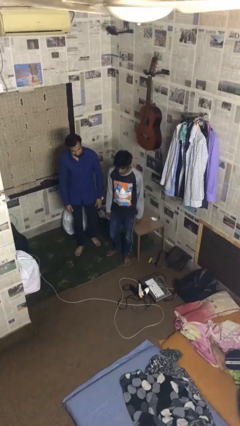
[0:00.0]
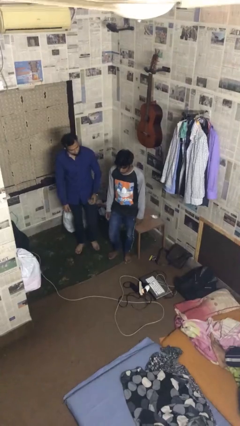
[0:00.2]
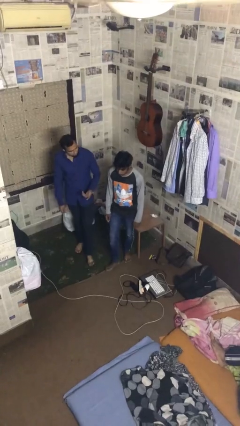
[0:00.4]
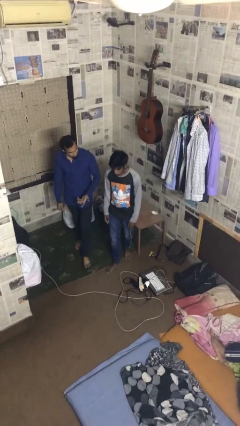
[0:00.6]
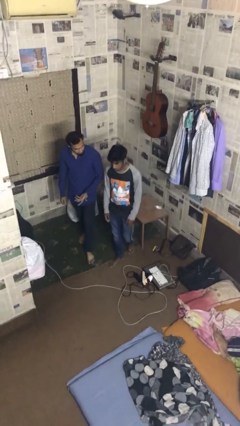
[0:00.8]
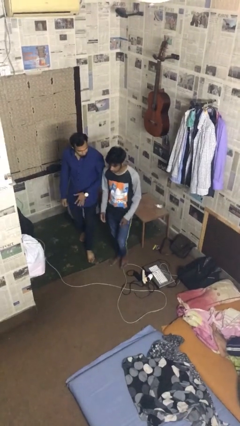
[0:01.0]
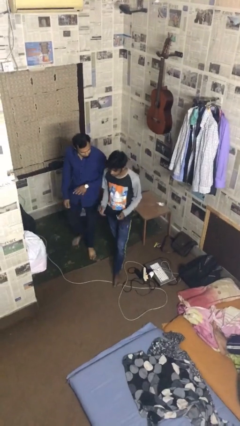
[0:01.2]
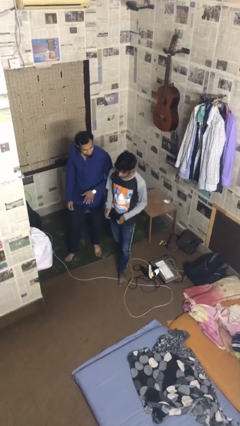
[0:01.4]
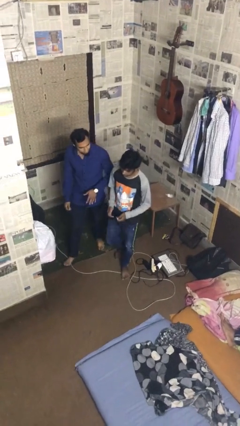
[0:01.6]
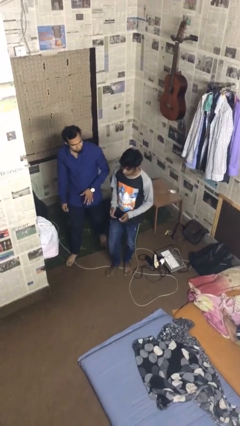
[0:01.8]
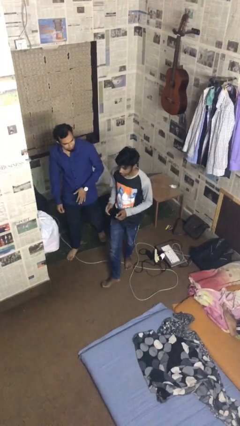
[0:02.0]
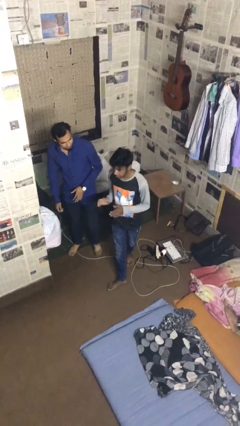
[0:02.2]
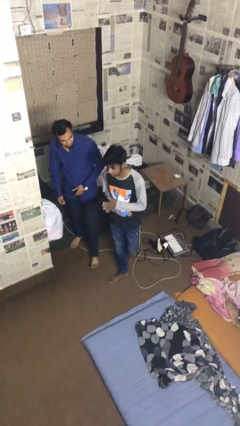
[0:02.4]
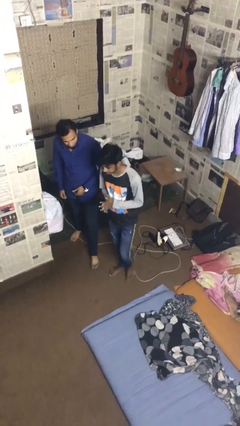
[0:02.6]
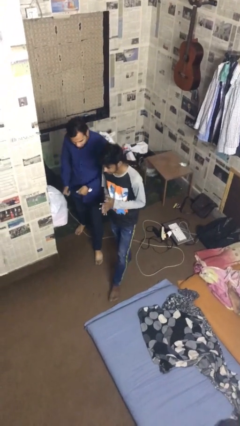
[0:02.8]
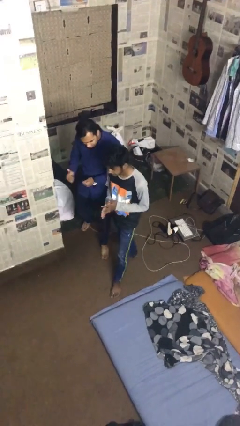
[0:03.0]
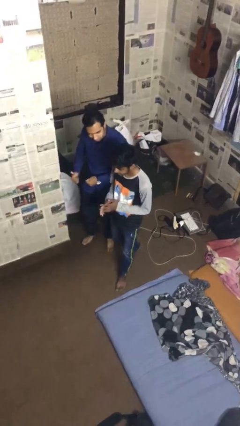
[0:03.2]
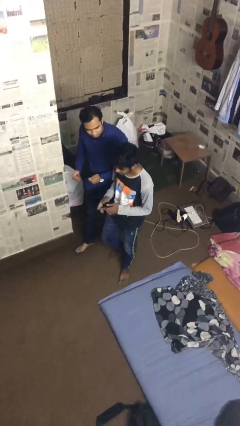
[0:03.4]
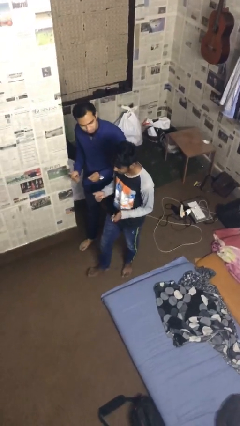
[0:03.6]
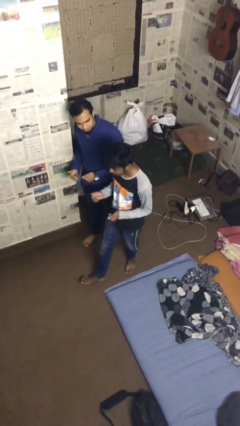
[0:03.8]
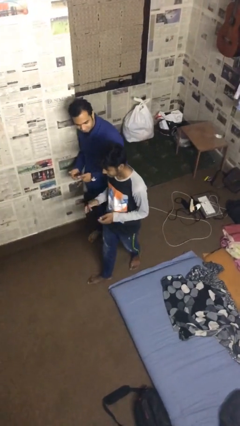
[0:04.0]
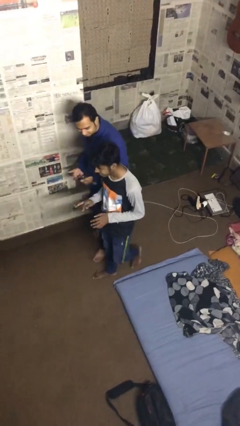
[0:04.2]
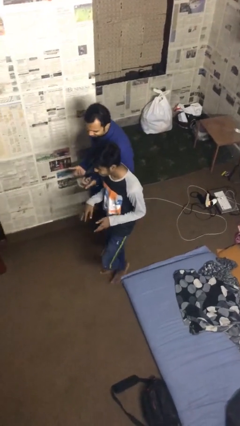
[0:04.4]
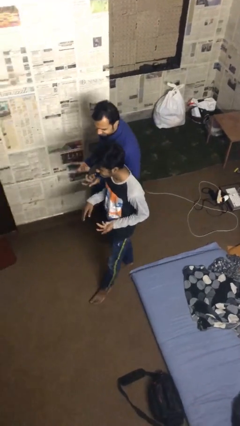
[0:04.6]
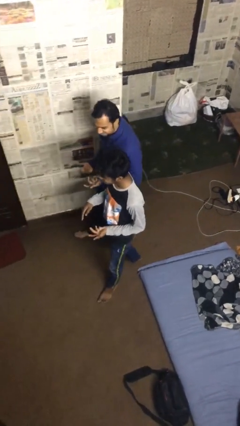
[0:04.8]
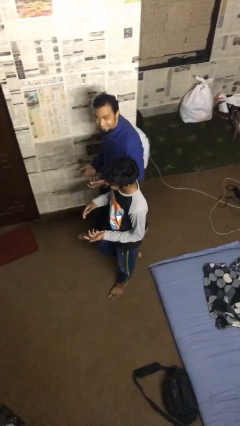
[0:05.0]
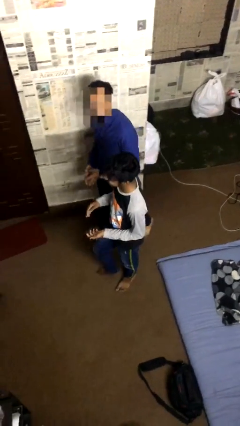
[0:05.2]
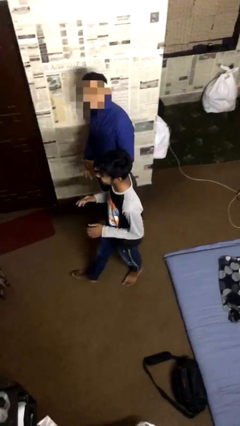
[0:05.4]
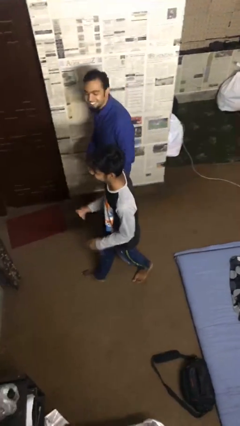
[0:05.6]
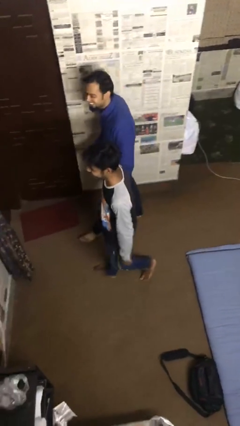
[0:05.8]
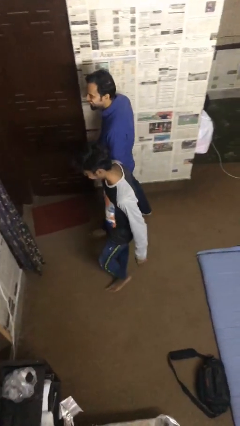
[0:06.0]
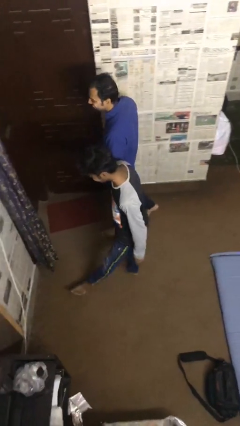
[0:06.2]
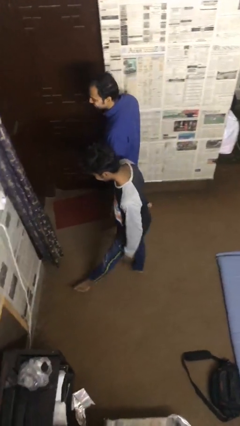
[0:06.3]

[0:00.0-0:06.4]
person talks to person

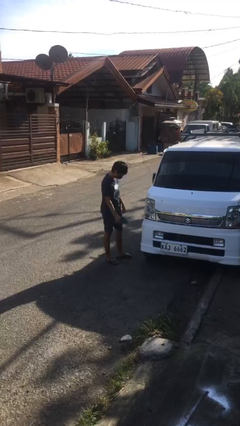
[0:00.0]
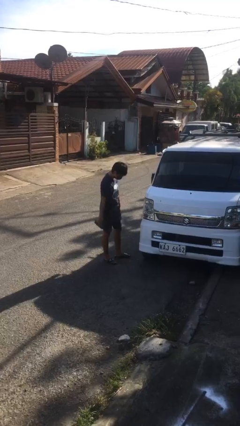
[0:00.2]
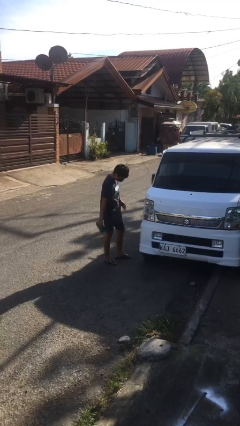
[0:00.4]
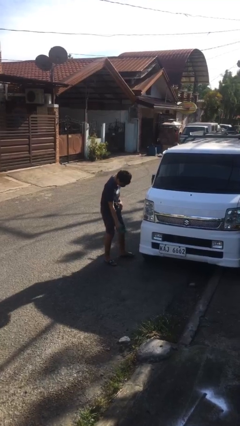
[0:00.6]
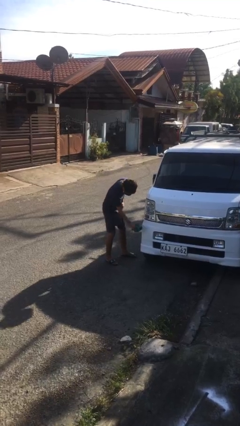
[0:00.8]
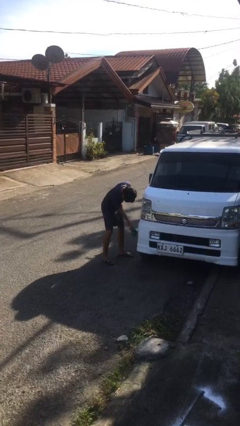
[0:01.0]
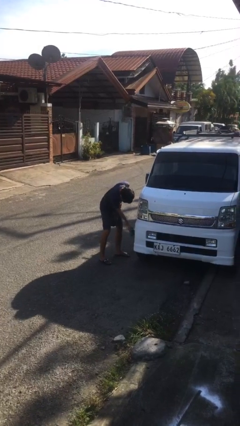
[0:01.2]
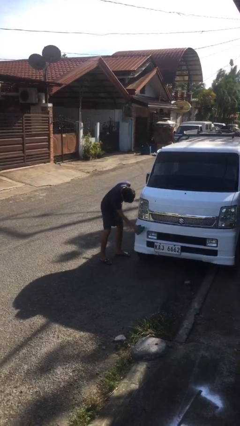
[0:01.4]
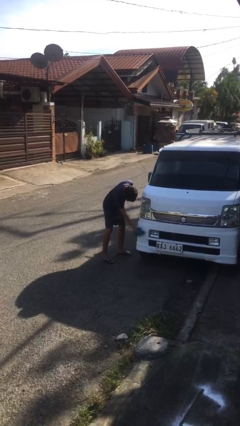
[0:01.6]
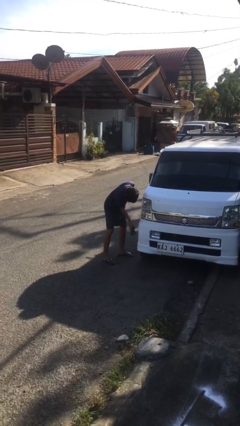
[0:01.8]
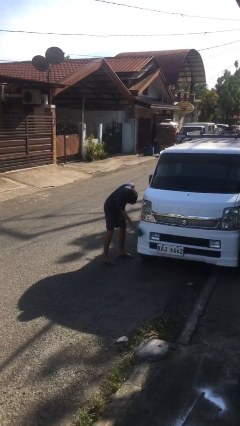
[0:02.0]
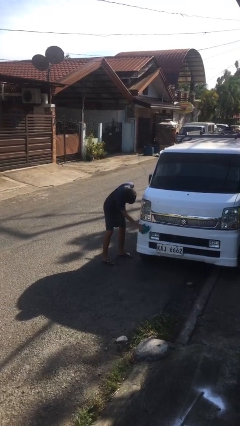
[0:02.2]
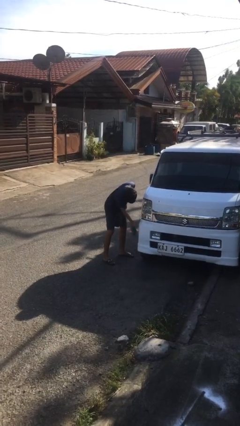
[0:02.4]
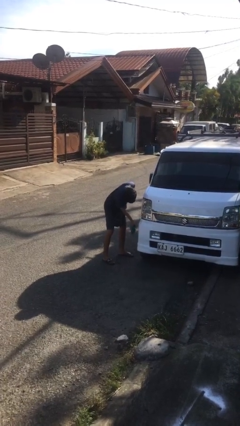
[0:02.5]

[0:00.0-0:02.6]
person polishes car with rag

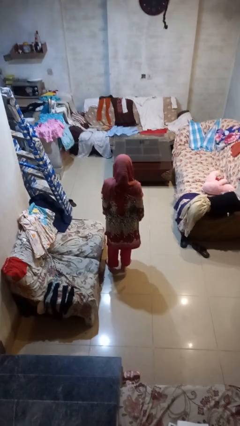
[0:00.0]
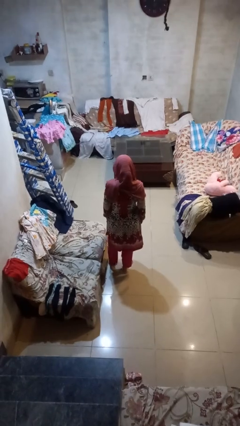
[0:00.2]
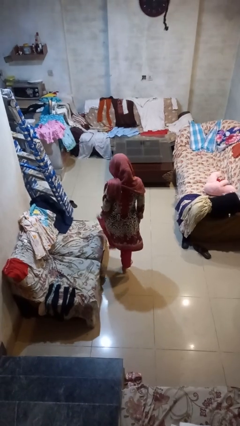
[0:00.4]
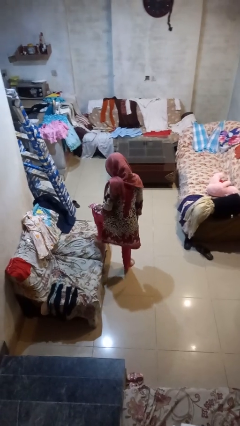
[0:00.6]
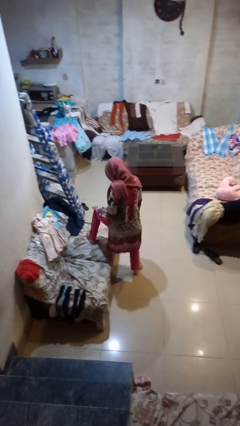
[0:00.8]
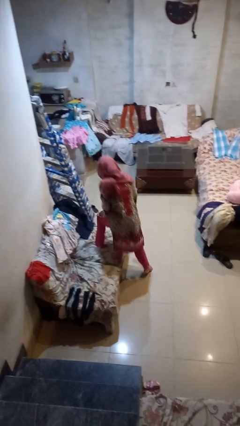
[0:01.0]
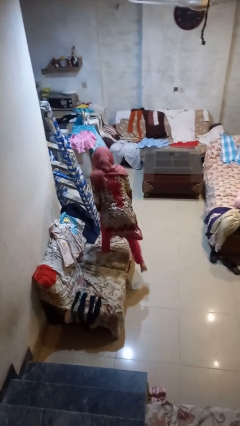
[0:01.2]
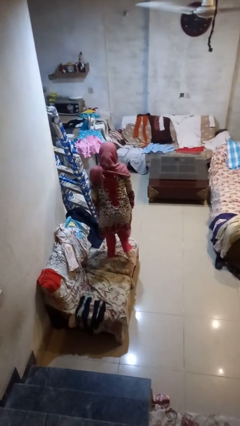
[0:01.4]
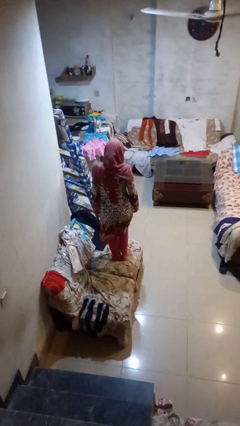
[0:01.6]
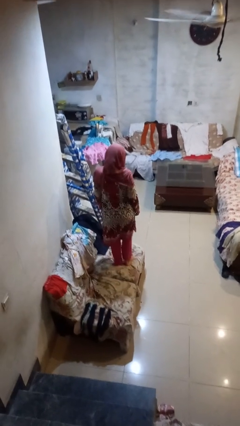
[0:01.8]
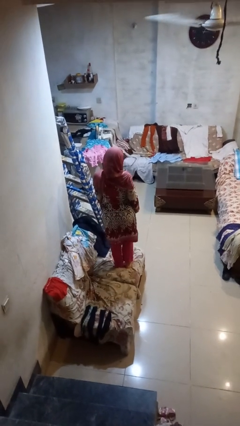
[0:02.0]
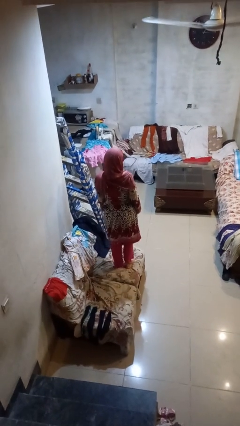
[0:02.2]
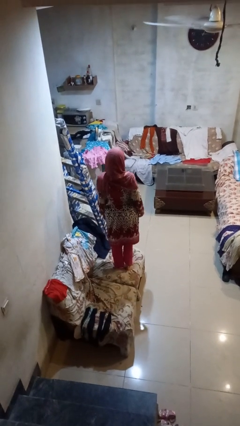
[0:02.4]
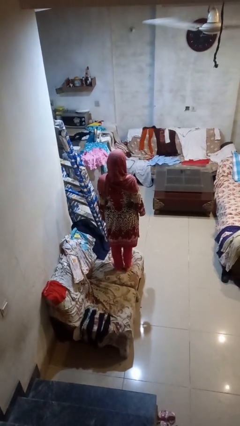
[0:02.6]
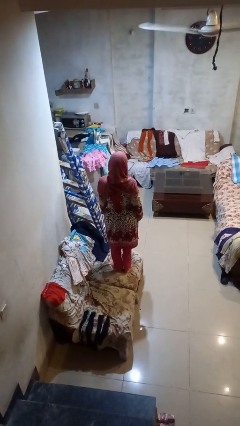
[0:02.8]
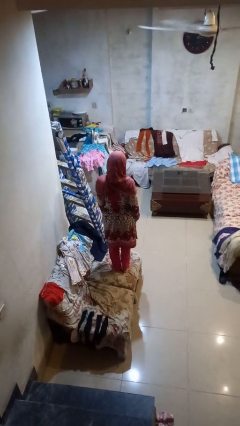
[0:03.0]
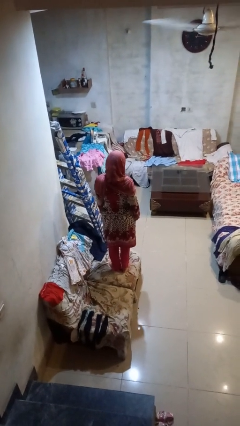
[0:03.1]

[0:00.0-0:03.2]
person climbs on couch

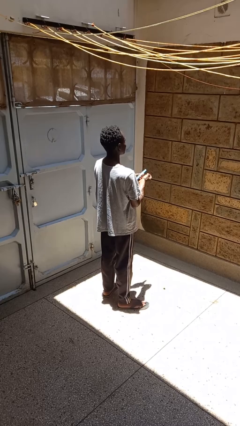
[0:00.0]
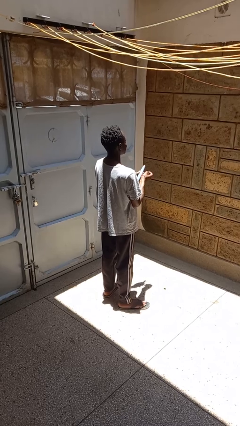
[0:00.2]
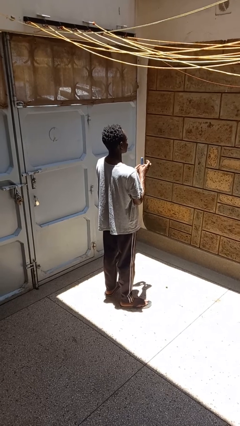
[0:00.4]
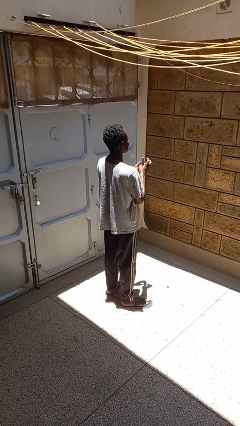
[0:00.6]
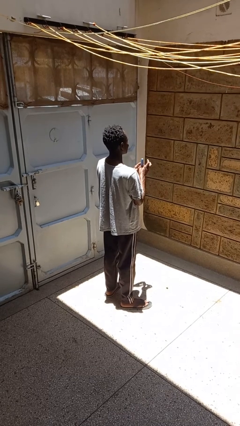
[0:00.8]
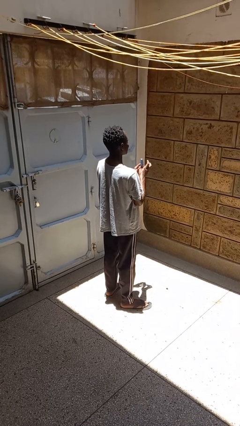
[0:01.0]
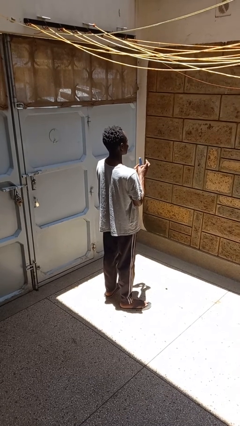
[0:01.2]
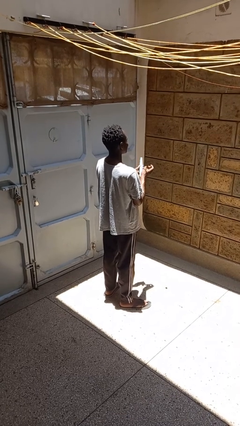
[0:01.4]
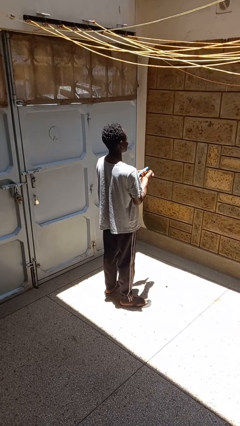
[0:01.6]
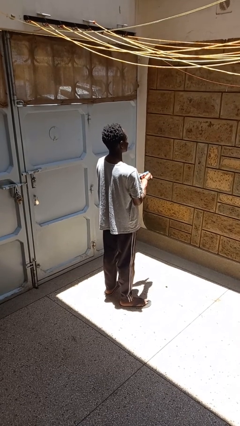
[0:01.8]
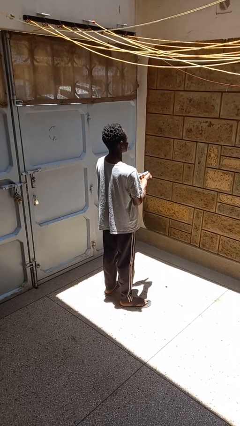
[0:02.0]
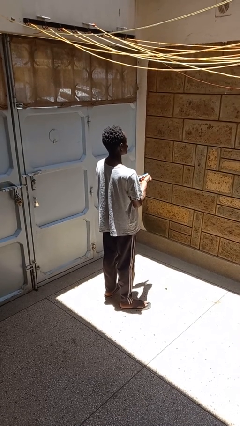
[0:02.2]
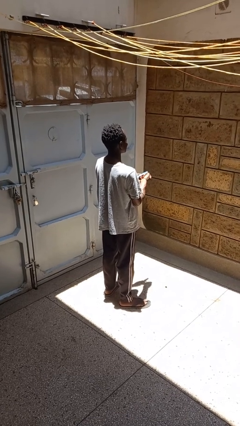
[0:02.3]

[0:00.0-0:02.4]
person files fingernails

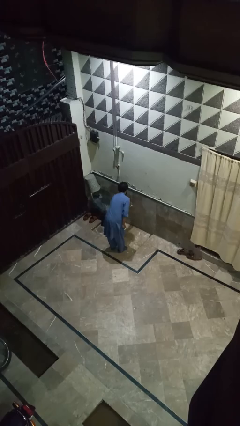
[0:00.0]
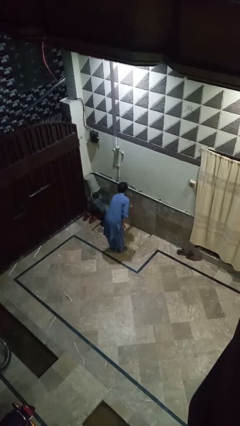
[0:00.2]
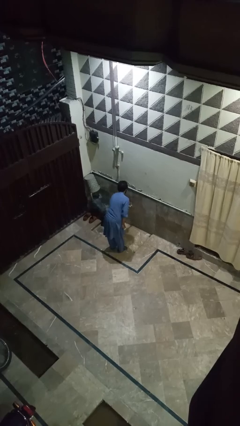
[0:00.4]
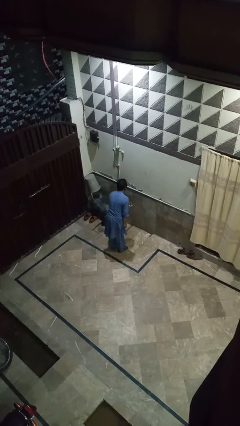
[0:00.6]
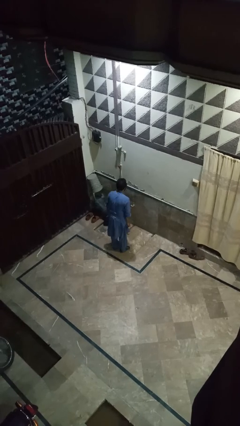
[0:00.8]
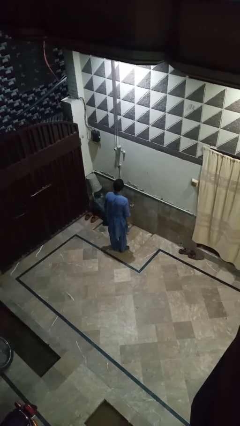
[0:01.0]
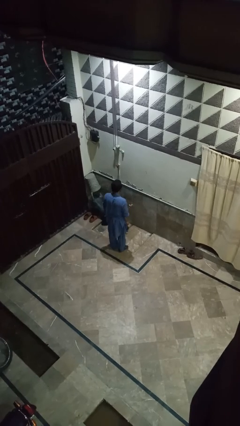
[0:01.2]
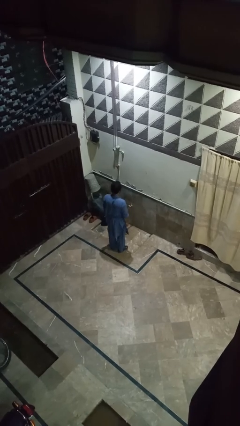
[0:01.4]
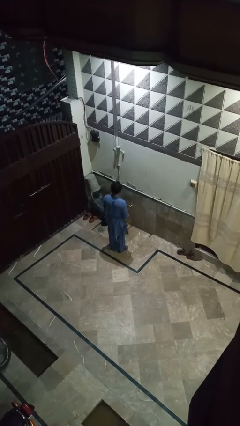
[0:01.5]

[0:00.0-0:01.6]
person turns off faucet

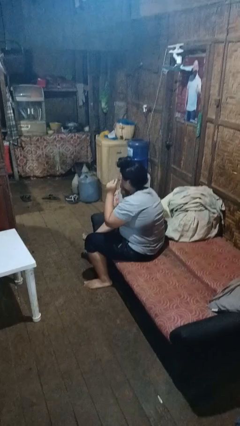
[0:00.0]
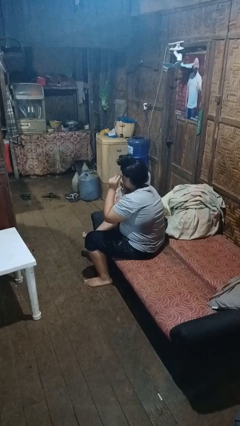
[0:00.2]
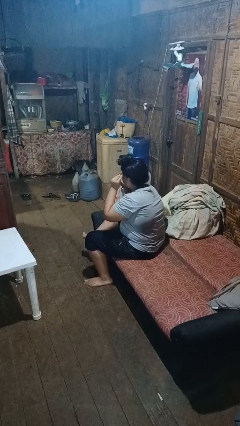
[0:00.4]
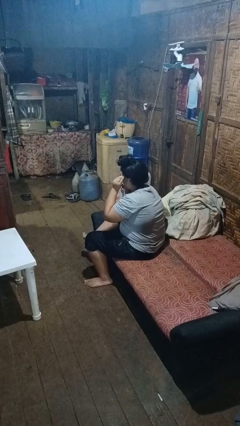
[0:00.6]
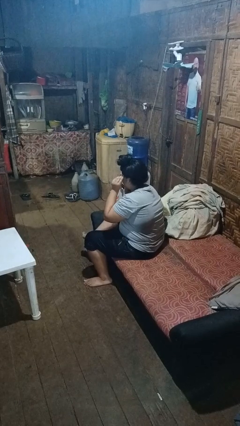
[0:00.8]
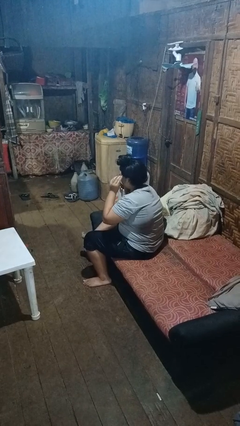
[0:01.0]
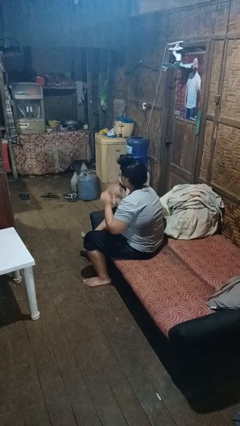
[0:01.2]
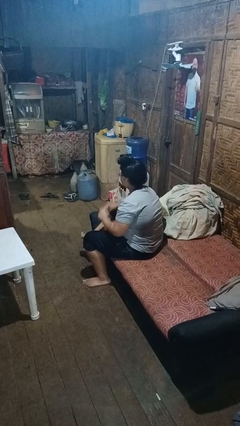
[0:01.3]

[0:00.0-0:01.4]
person puts on glasses
